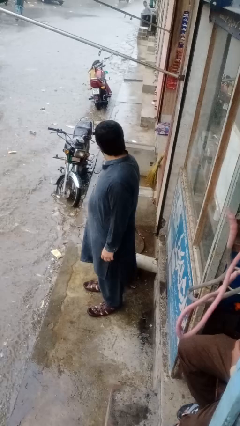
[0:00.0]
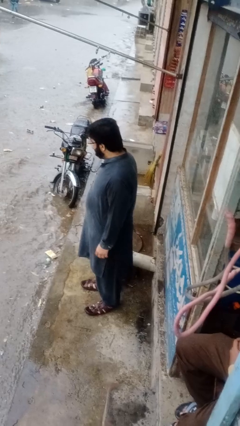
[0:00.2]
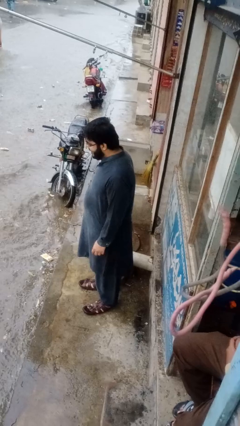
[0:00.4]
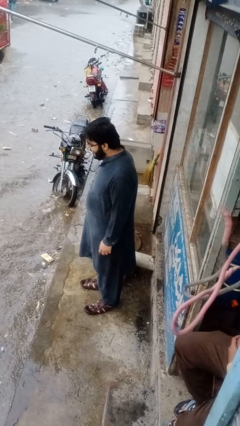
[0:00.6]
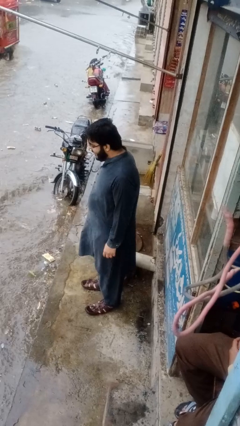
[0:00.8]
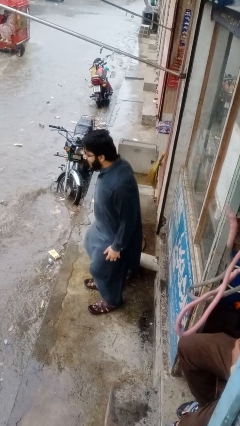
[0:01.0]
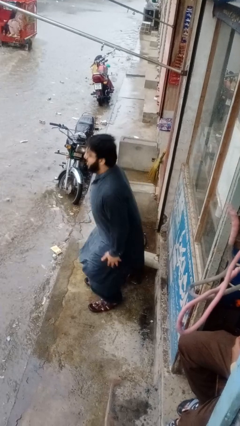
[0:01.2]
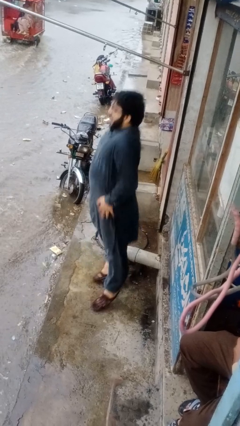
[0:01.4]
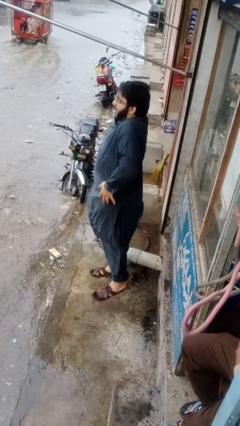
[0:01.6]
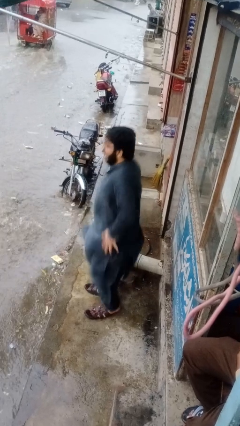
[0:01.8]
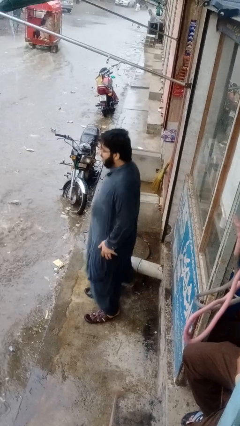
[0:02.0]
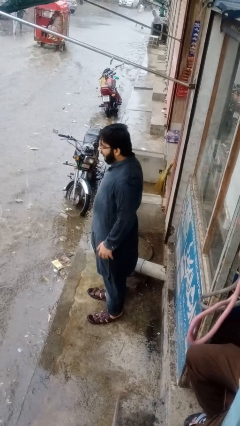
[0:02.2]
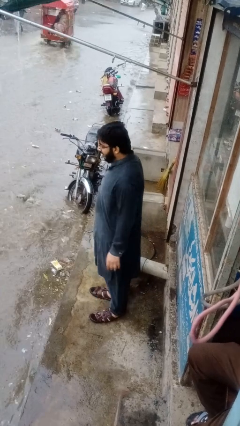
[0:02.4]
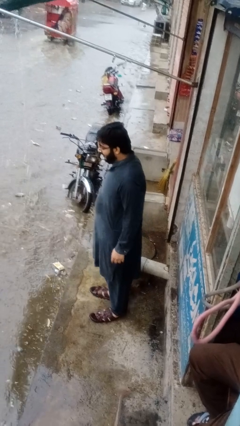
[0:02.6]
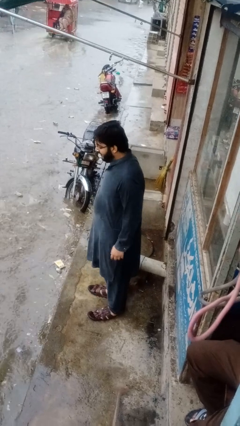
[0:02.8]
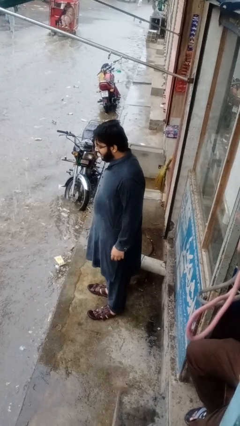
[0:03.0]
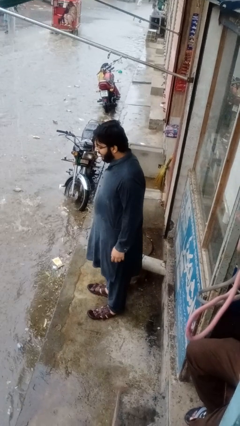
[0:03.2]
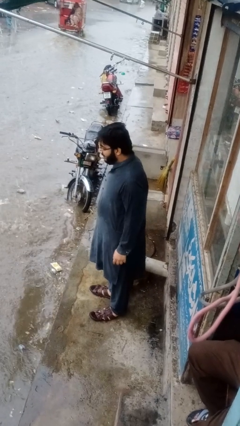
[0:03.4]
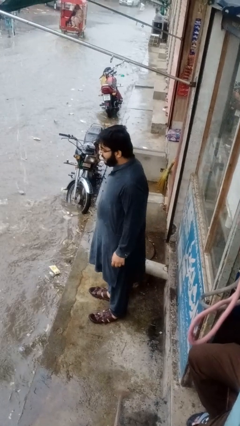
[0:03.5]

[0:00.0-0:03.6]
person jumps

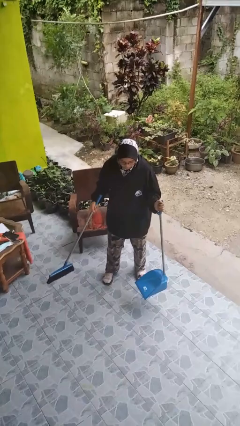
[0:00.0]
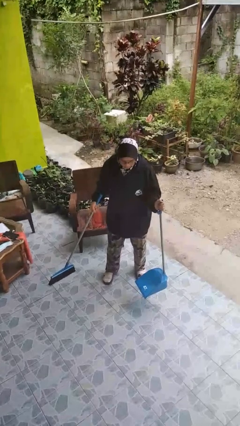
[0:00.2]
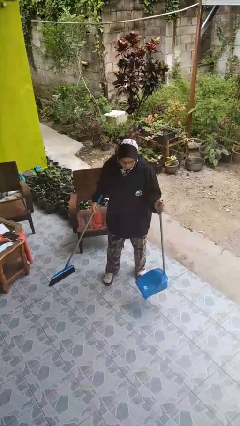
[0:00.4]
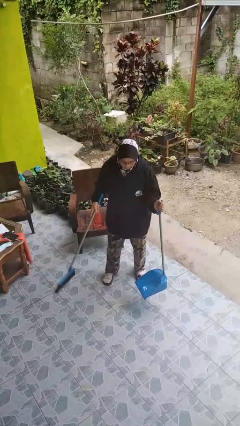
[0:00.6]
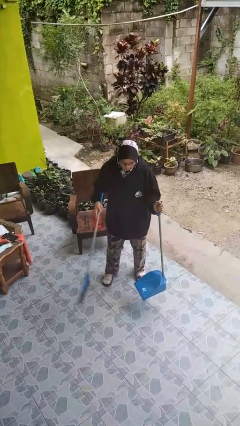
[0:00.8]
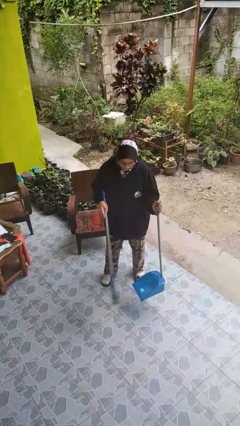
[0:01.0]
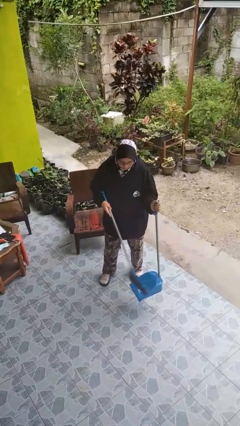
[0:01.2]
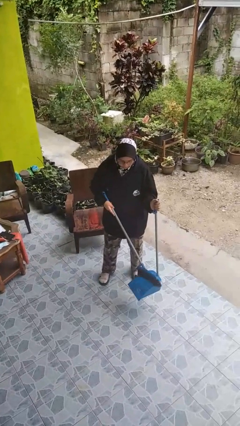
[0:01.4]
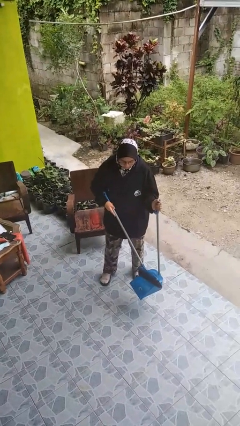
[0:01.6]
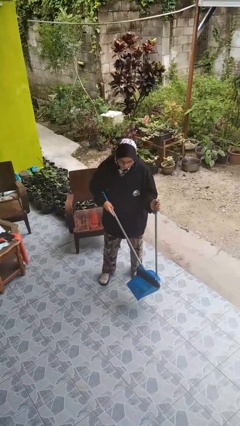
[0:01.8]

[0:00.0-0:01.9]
person sweeps floor

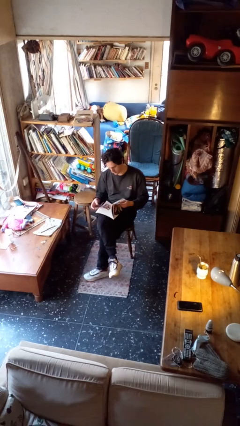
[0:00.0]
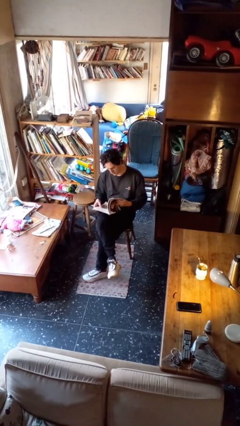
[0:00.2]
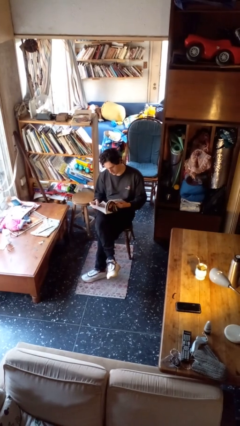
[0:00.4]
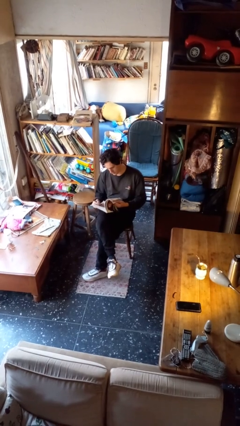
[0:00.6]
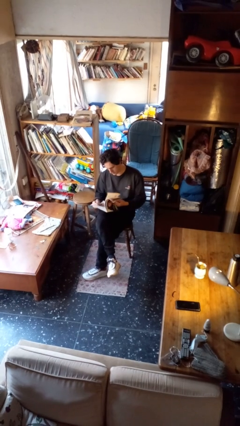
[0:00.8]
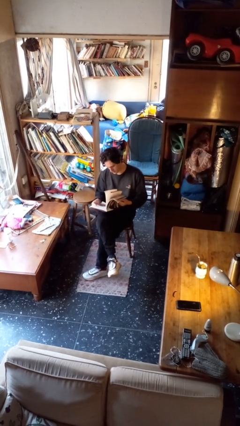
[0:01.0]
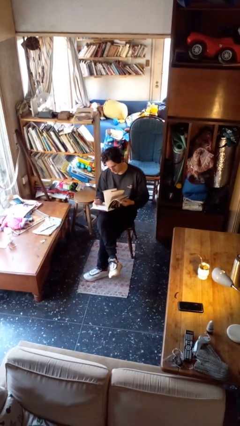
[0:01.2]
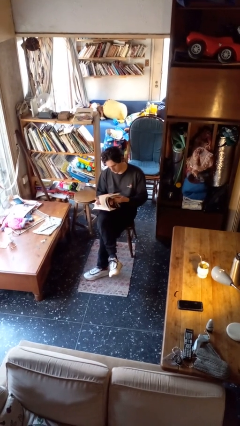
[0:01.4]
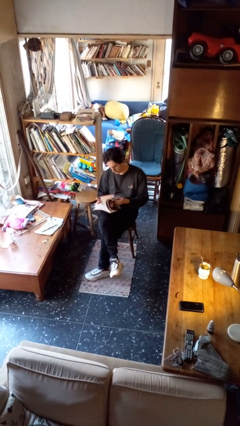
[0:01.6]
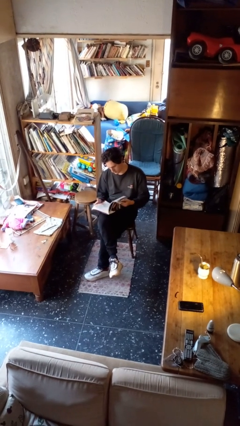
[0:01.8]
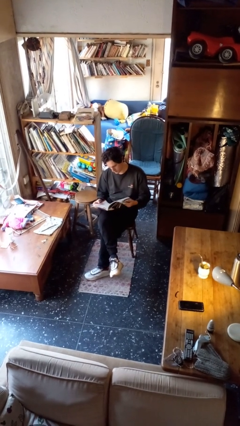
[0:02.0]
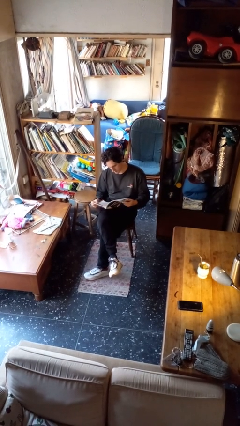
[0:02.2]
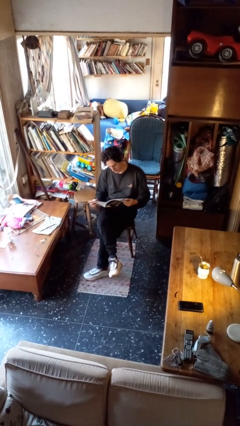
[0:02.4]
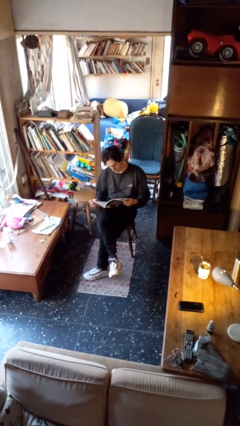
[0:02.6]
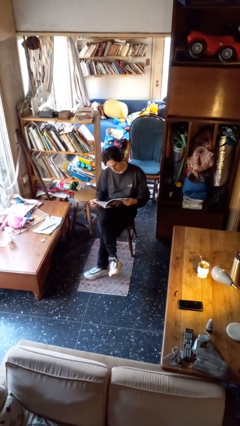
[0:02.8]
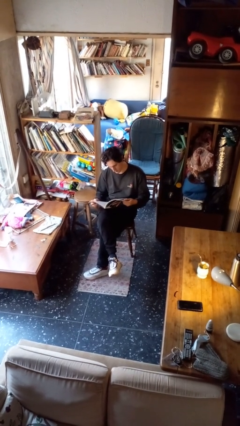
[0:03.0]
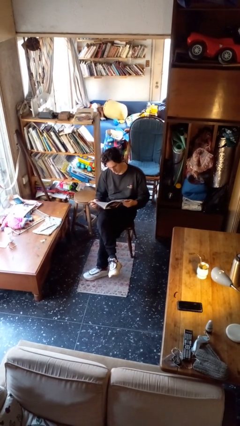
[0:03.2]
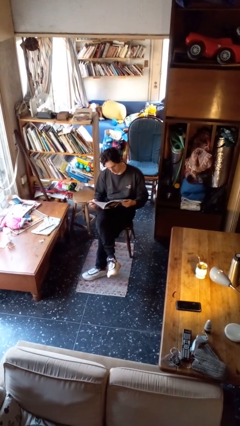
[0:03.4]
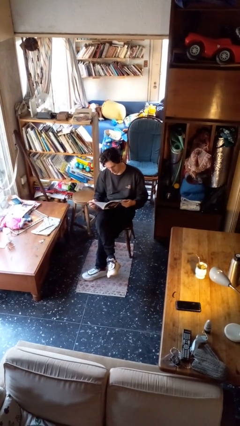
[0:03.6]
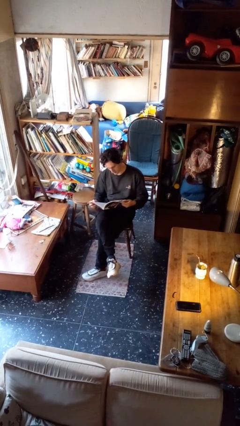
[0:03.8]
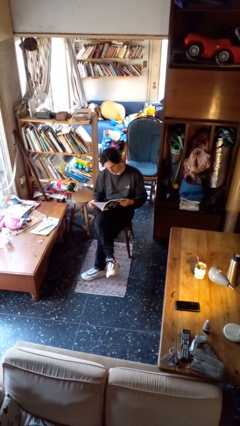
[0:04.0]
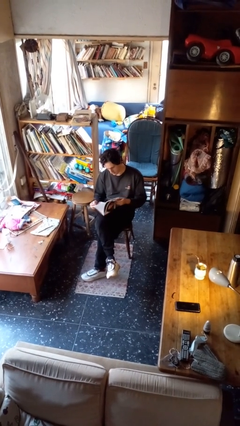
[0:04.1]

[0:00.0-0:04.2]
person reads magazine

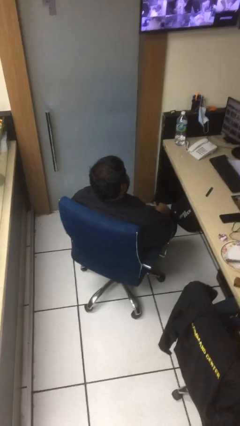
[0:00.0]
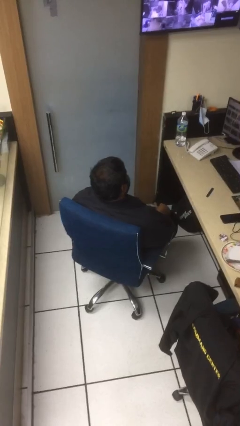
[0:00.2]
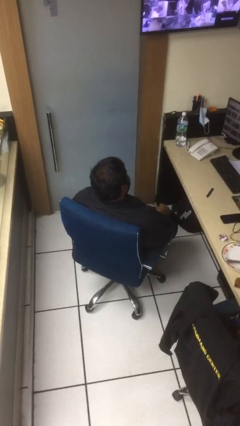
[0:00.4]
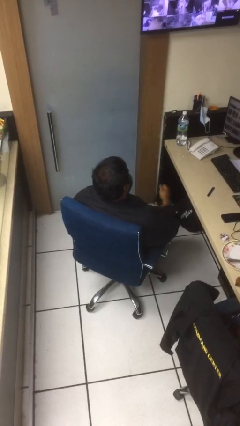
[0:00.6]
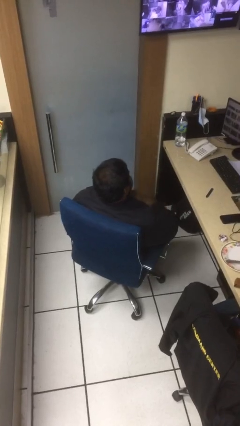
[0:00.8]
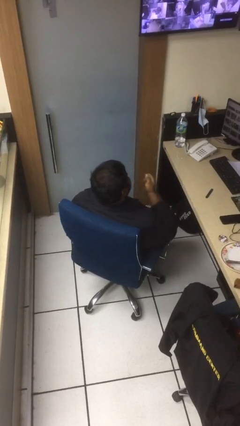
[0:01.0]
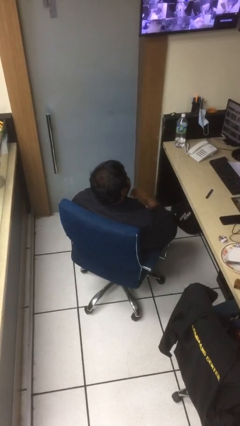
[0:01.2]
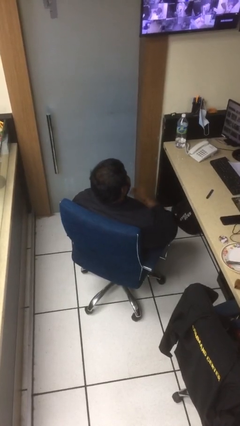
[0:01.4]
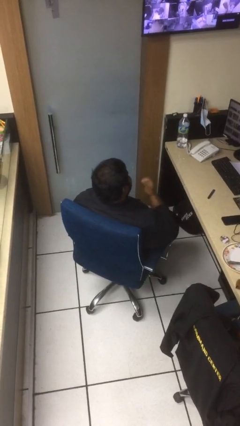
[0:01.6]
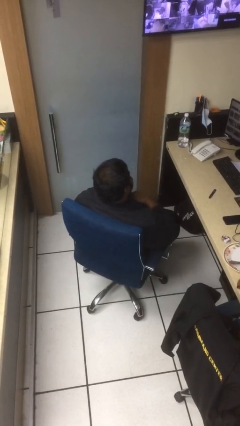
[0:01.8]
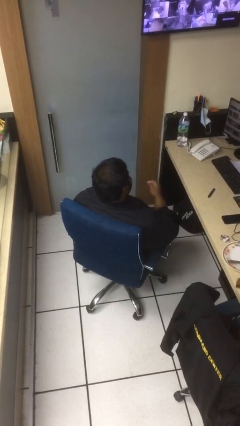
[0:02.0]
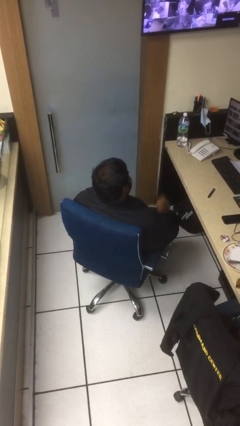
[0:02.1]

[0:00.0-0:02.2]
person drums on chest

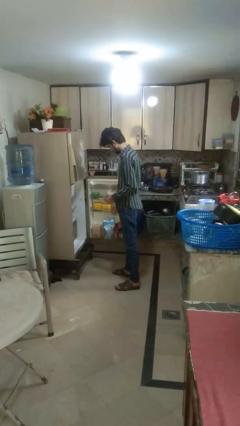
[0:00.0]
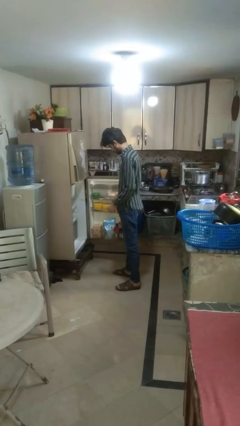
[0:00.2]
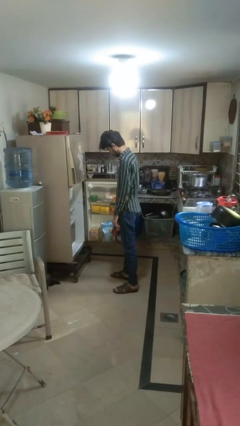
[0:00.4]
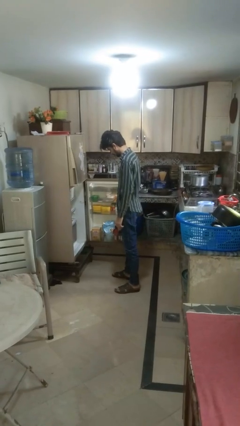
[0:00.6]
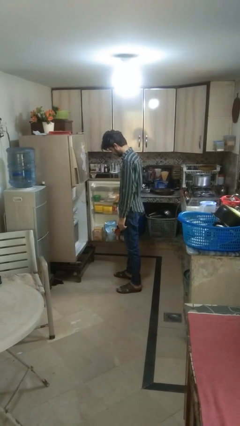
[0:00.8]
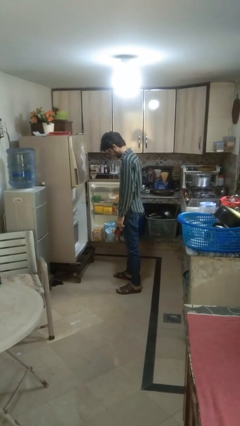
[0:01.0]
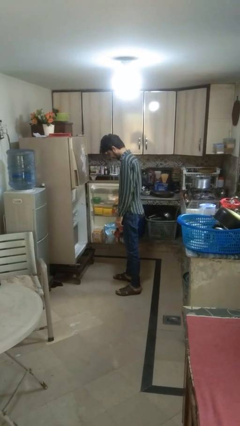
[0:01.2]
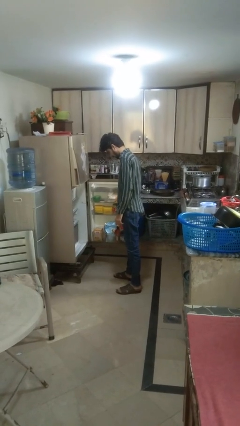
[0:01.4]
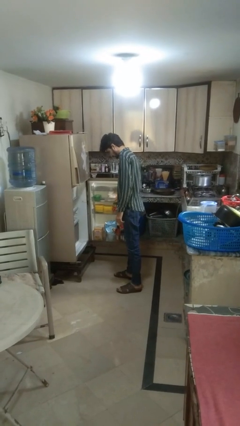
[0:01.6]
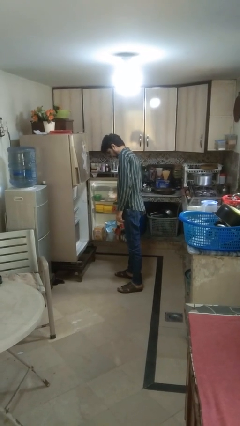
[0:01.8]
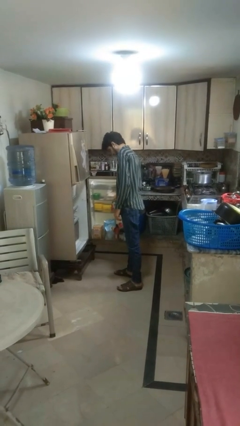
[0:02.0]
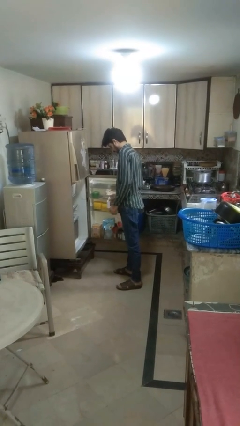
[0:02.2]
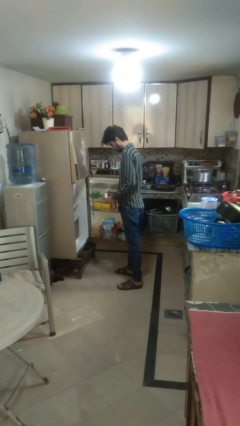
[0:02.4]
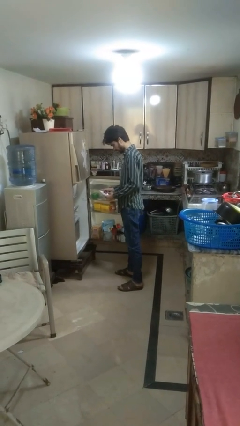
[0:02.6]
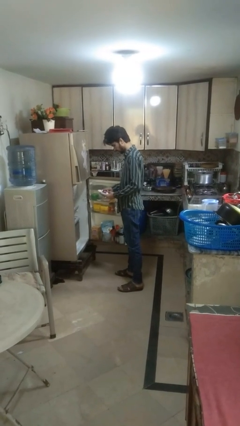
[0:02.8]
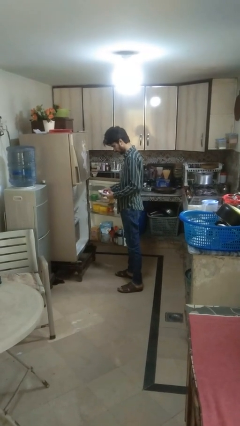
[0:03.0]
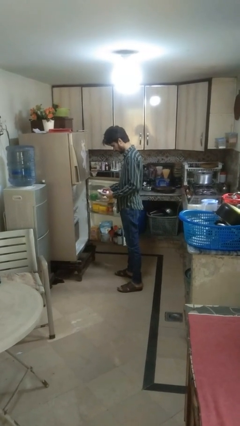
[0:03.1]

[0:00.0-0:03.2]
person takes object from refrigerator

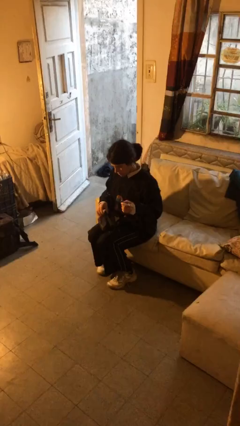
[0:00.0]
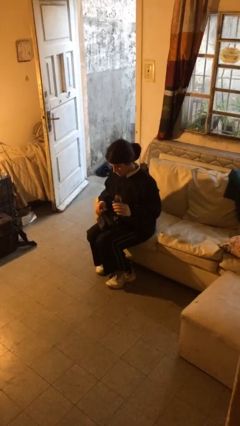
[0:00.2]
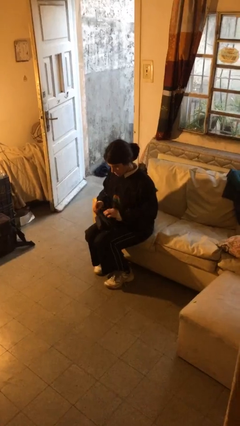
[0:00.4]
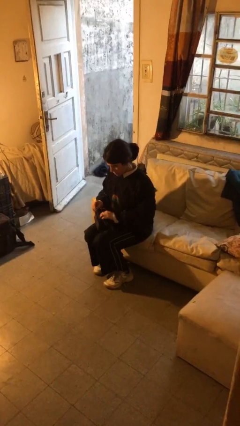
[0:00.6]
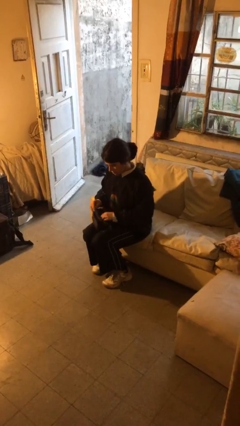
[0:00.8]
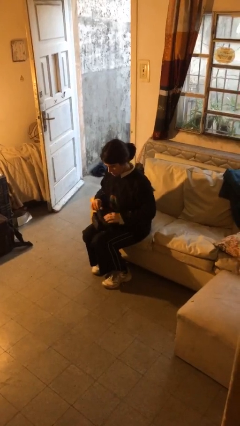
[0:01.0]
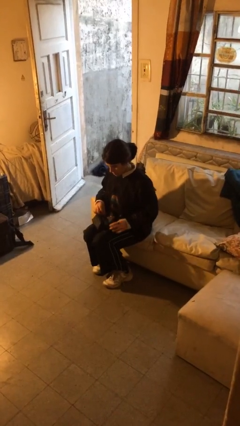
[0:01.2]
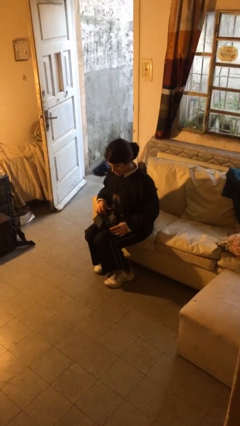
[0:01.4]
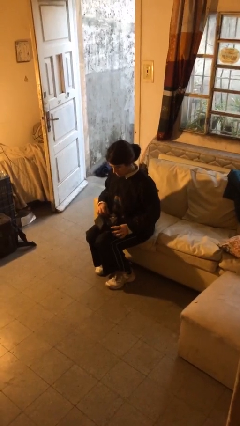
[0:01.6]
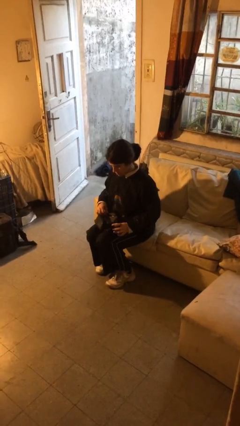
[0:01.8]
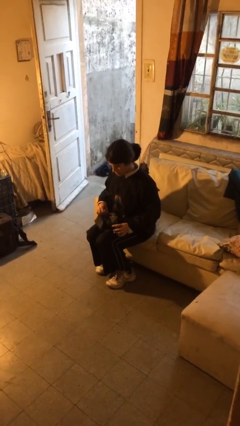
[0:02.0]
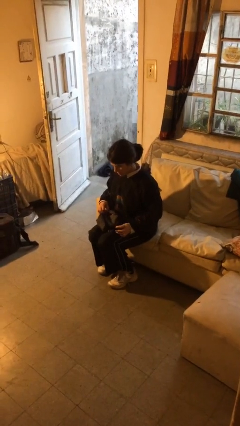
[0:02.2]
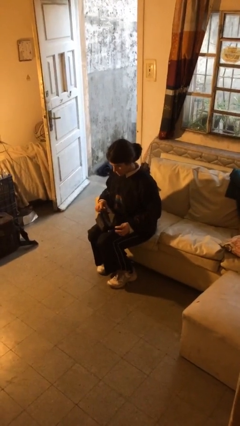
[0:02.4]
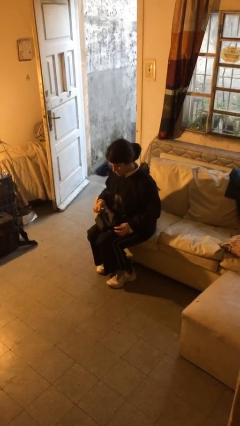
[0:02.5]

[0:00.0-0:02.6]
person puts object into purse
